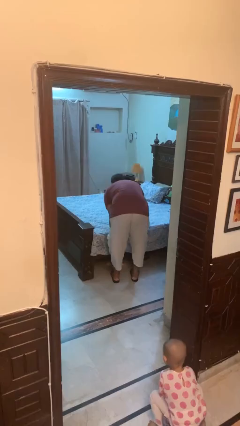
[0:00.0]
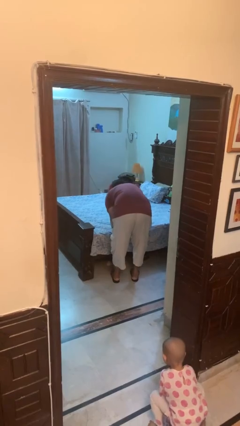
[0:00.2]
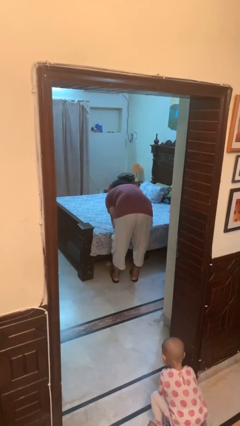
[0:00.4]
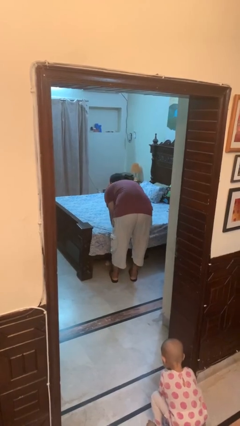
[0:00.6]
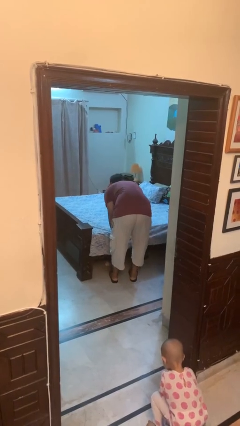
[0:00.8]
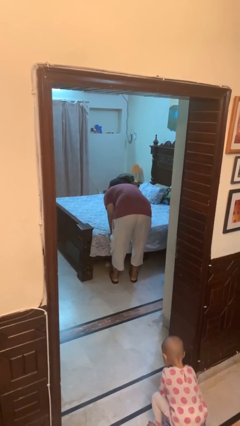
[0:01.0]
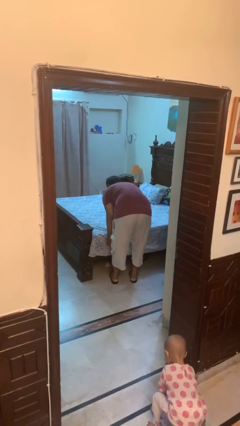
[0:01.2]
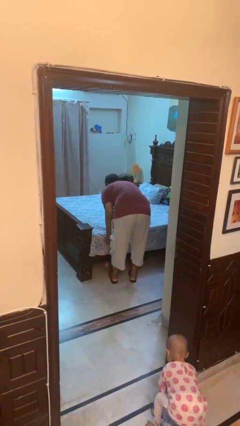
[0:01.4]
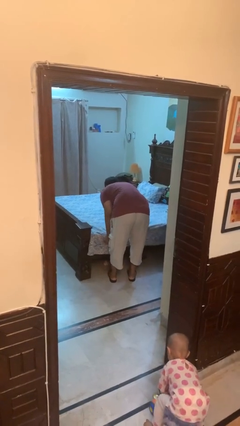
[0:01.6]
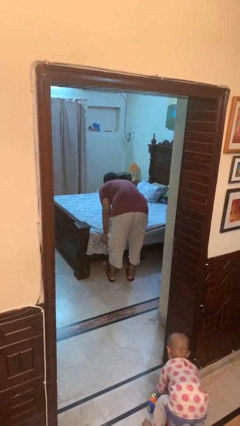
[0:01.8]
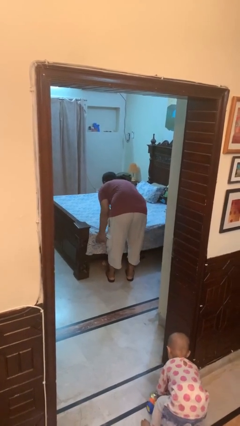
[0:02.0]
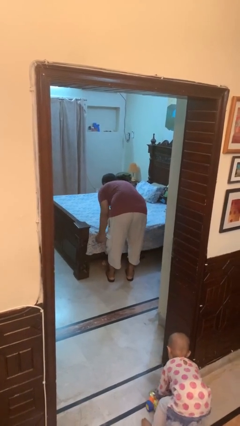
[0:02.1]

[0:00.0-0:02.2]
person makes bed

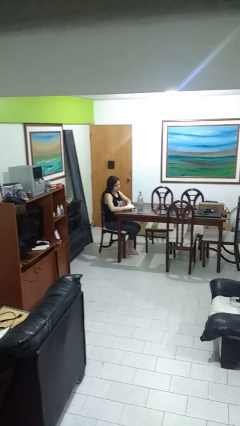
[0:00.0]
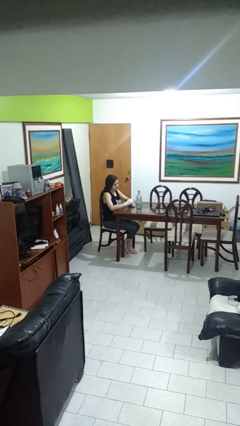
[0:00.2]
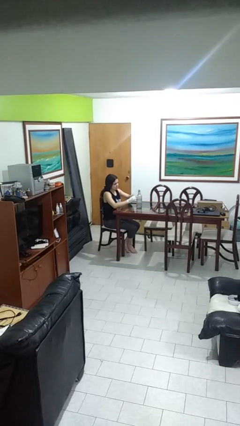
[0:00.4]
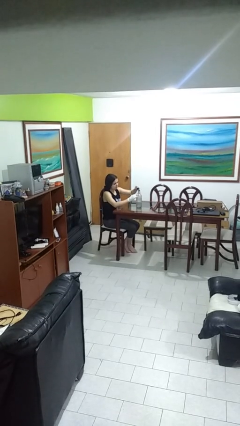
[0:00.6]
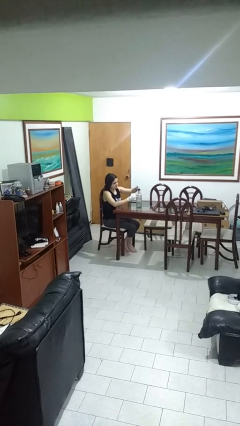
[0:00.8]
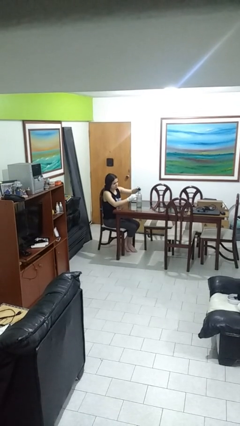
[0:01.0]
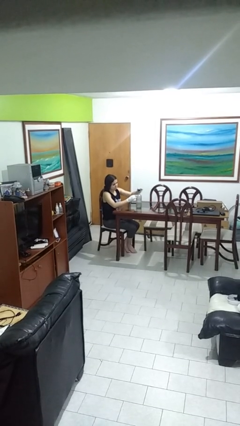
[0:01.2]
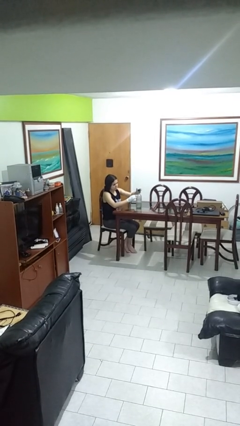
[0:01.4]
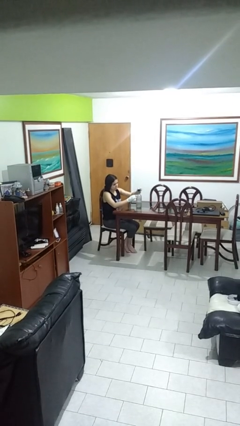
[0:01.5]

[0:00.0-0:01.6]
person screws lid to bottle

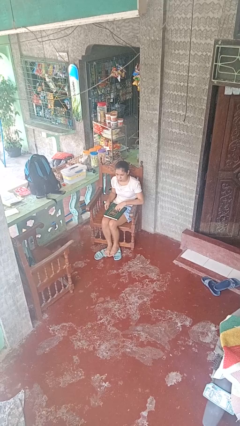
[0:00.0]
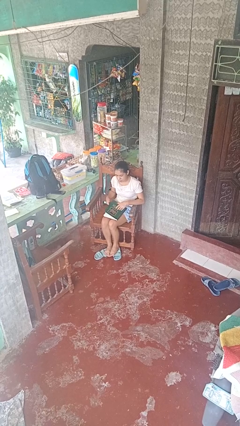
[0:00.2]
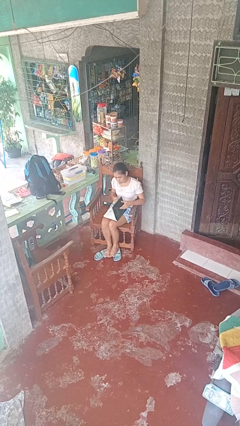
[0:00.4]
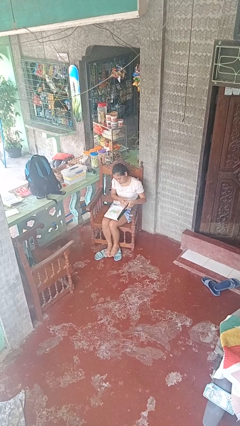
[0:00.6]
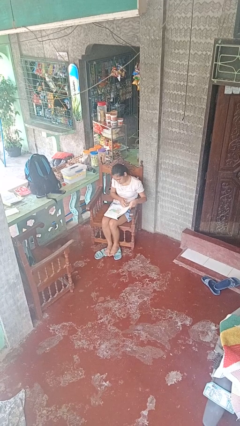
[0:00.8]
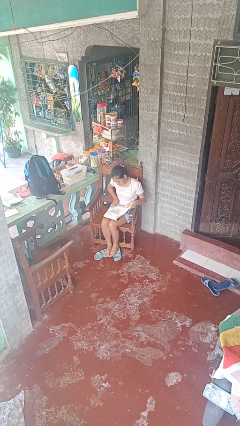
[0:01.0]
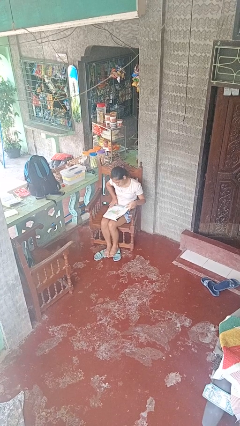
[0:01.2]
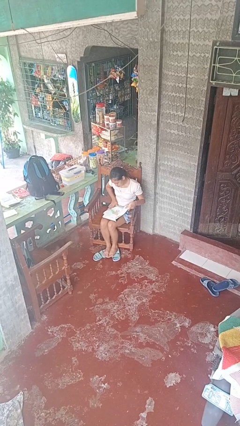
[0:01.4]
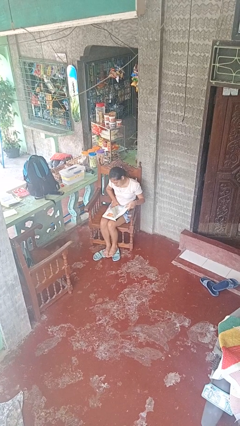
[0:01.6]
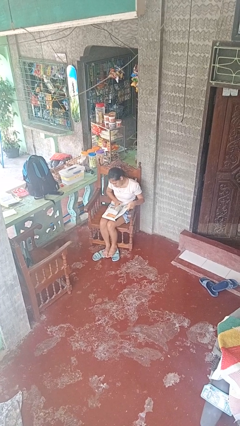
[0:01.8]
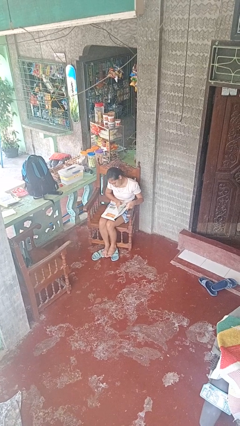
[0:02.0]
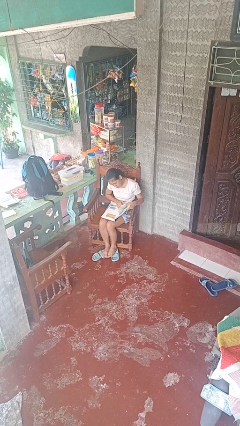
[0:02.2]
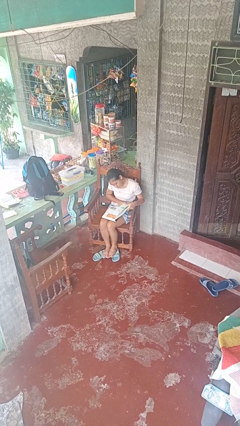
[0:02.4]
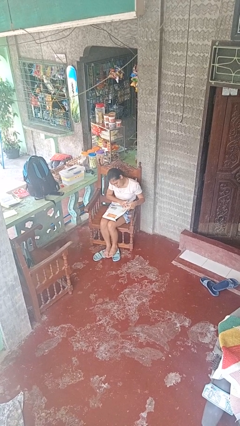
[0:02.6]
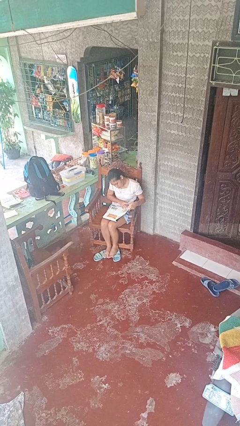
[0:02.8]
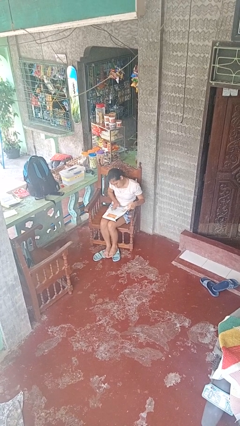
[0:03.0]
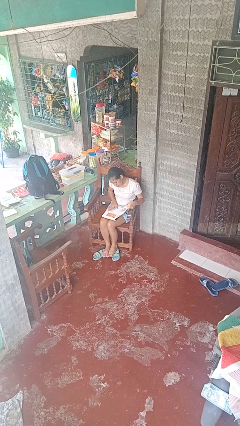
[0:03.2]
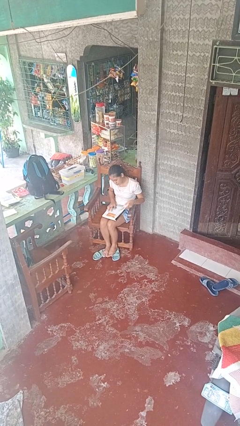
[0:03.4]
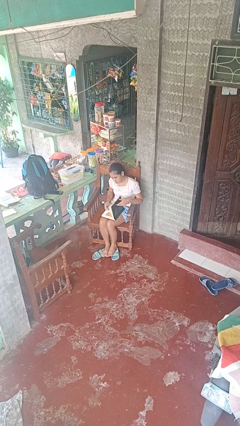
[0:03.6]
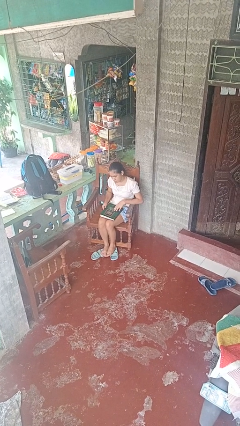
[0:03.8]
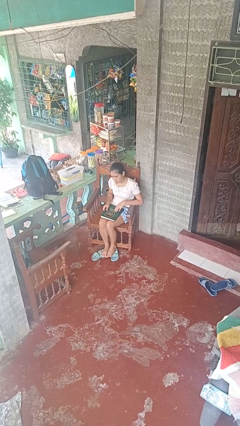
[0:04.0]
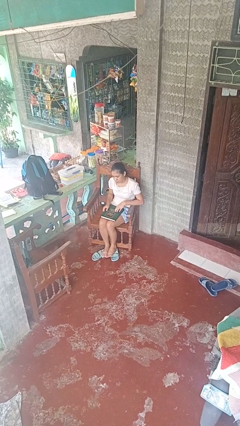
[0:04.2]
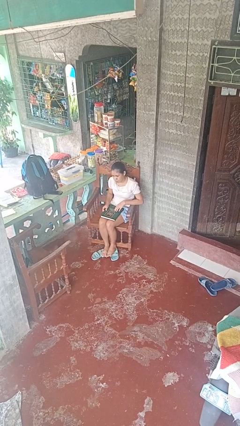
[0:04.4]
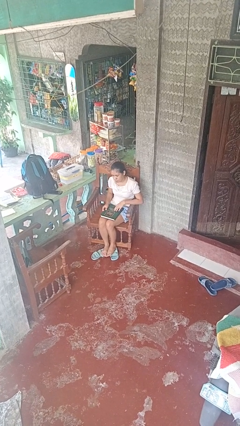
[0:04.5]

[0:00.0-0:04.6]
person reads book

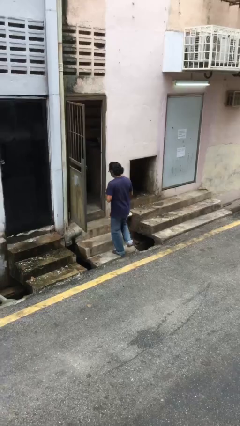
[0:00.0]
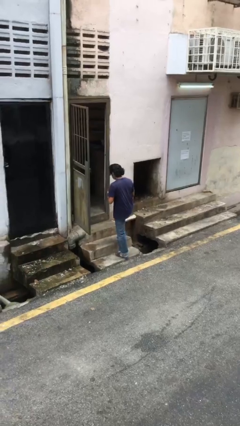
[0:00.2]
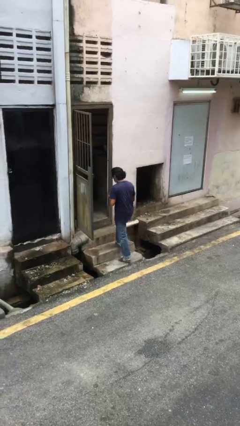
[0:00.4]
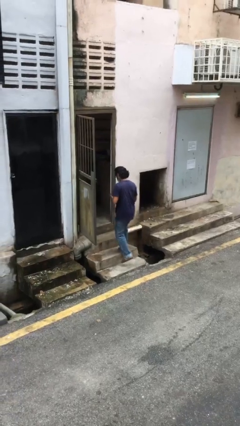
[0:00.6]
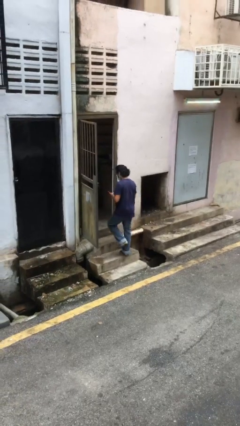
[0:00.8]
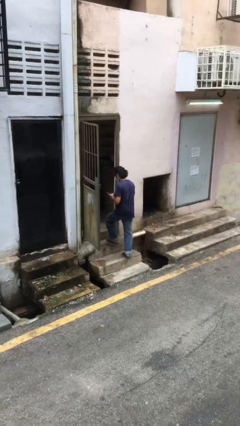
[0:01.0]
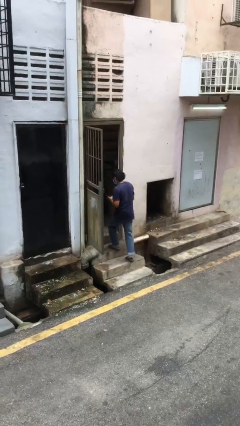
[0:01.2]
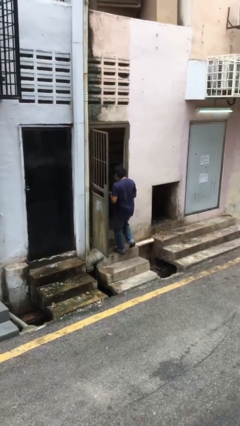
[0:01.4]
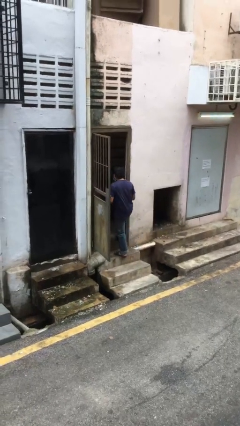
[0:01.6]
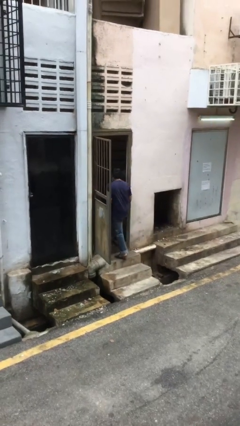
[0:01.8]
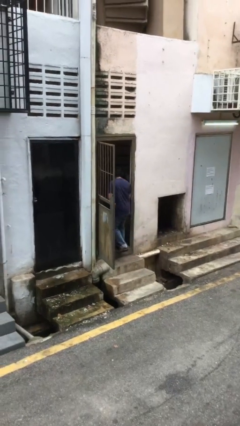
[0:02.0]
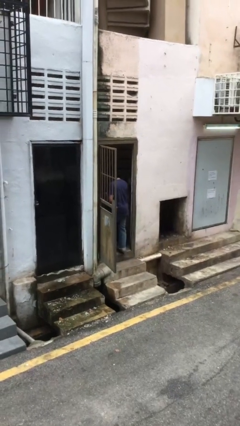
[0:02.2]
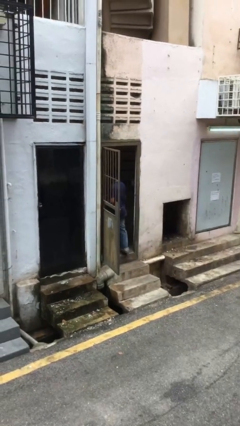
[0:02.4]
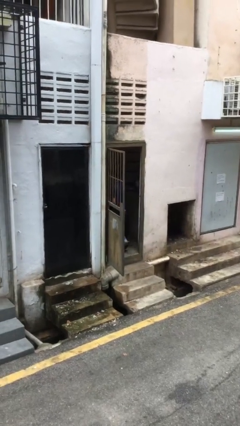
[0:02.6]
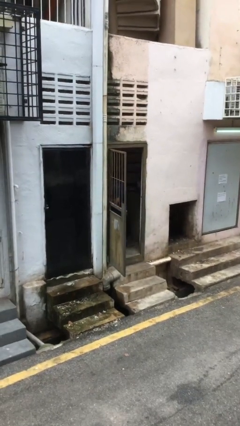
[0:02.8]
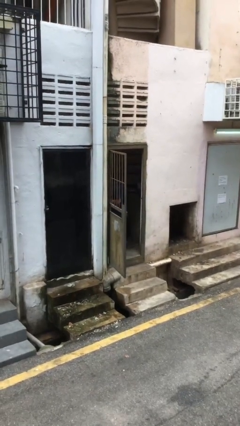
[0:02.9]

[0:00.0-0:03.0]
person exits scene through structure

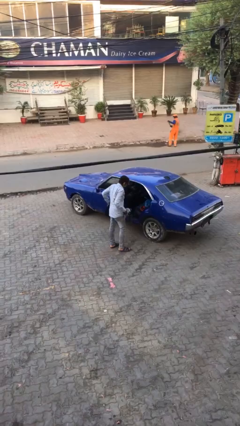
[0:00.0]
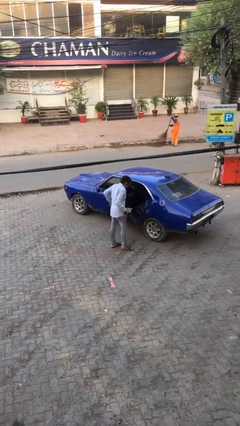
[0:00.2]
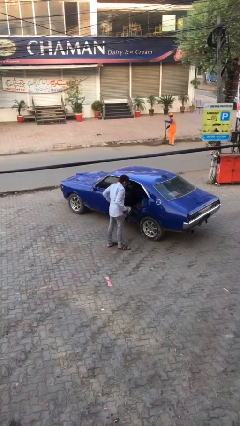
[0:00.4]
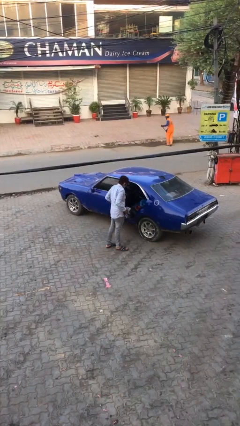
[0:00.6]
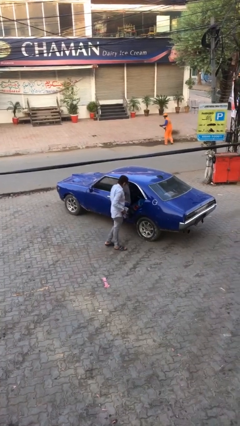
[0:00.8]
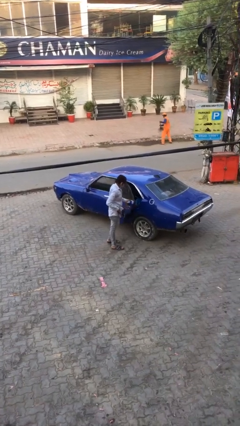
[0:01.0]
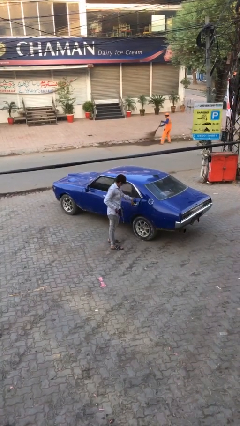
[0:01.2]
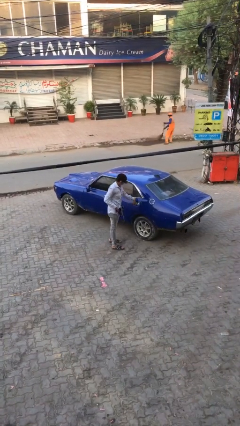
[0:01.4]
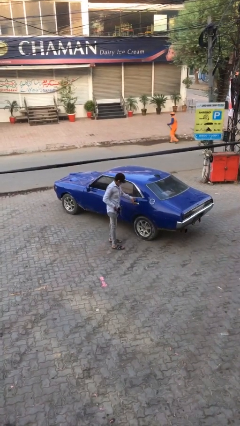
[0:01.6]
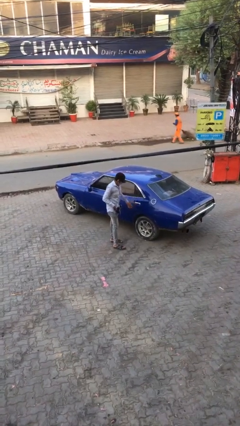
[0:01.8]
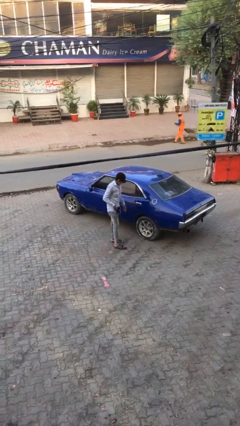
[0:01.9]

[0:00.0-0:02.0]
person closes car door

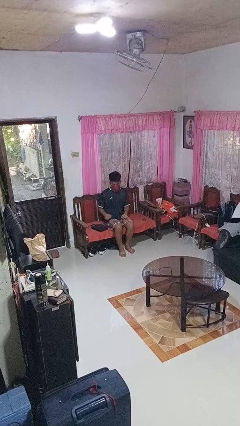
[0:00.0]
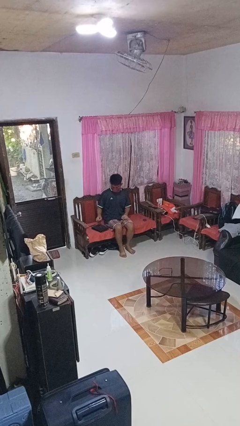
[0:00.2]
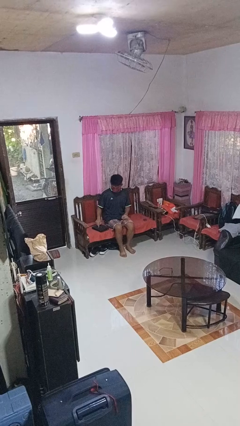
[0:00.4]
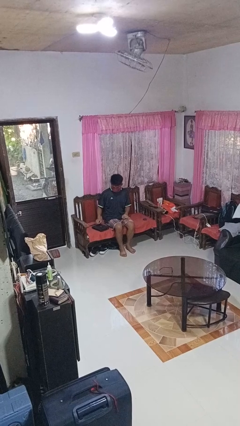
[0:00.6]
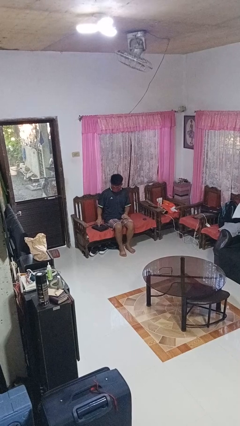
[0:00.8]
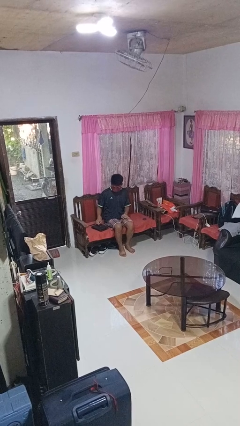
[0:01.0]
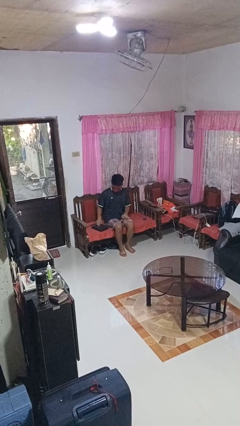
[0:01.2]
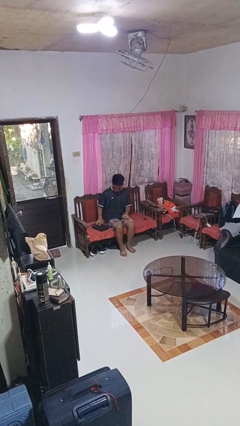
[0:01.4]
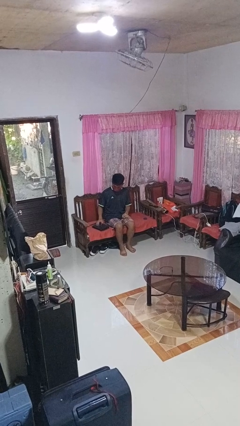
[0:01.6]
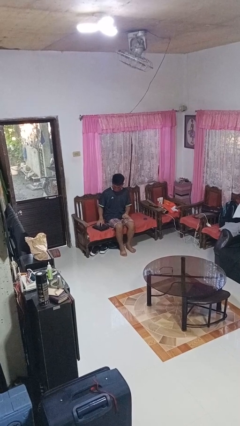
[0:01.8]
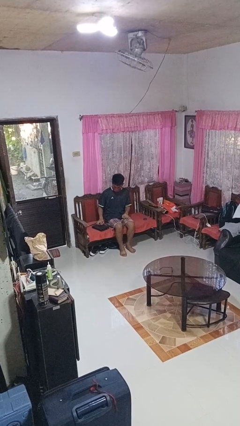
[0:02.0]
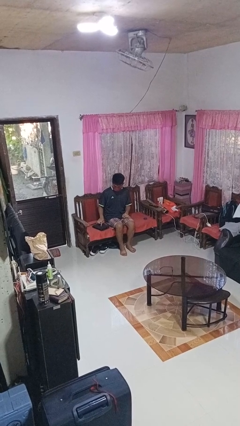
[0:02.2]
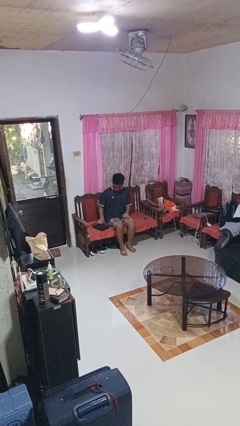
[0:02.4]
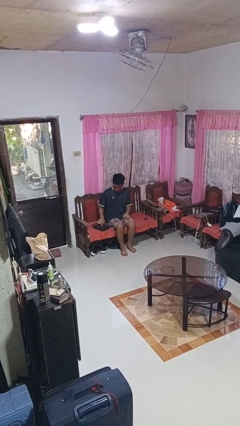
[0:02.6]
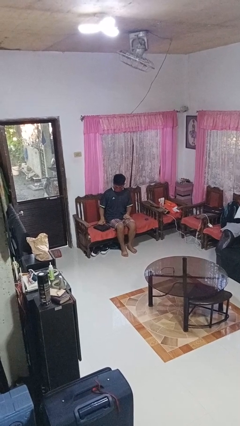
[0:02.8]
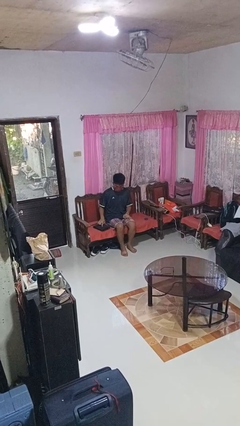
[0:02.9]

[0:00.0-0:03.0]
person taps object with finger

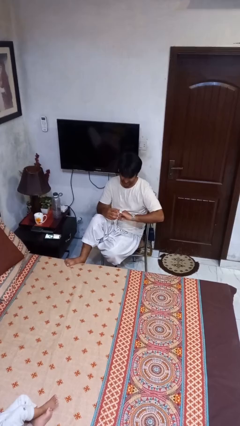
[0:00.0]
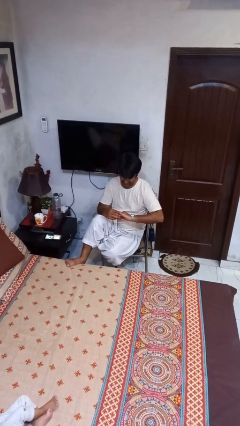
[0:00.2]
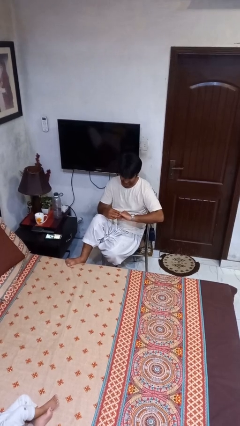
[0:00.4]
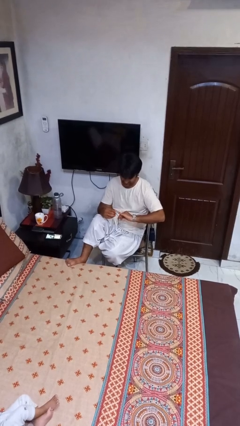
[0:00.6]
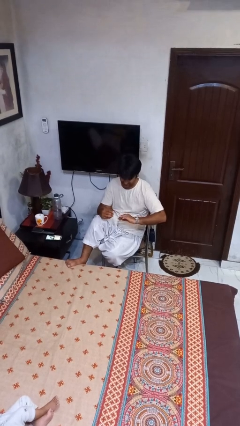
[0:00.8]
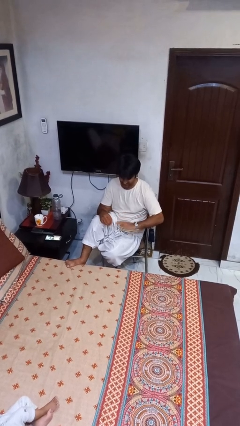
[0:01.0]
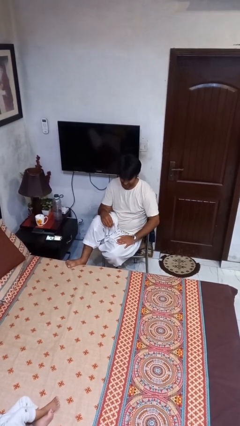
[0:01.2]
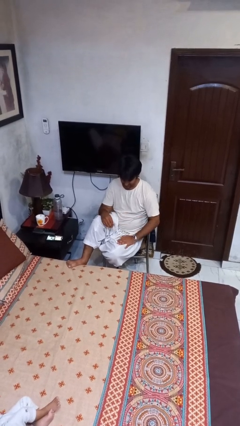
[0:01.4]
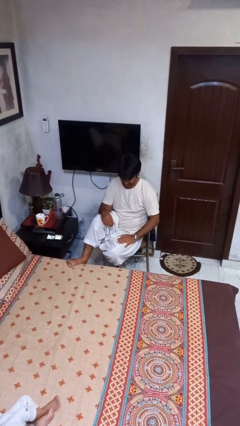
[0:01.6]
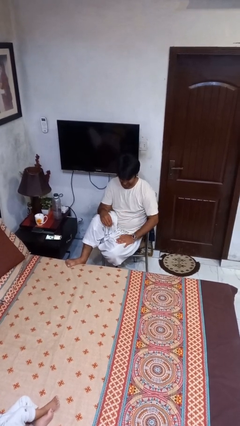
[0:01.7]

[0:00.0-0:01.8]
person takes off ring
